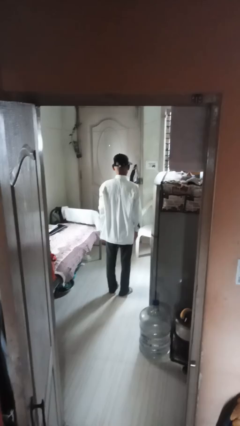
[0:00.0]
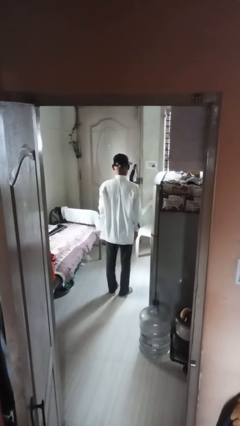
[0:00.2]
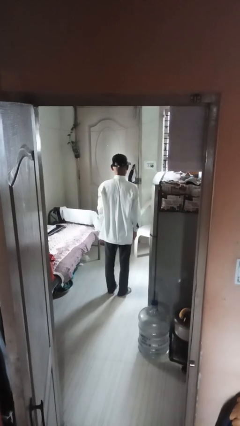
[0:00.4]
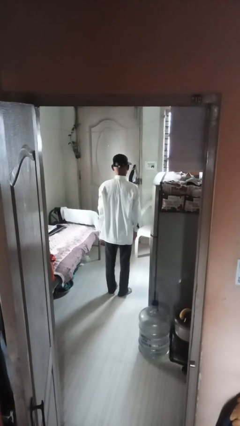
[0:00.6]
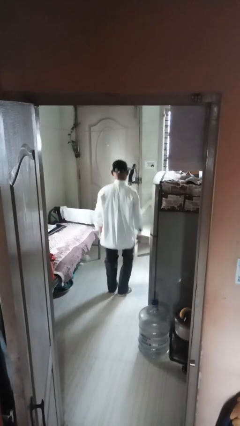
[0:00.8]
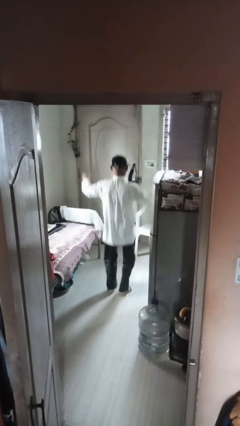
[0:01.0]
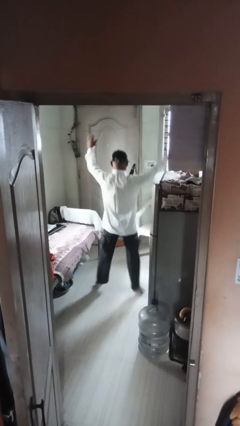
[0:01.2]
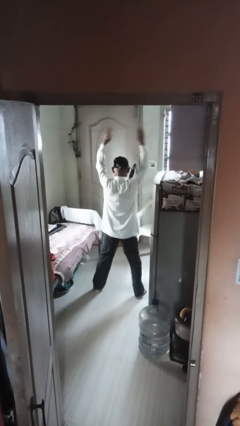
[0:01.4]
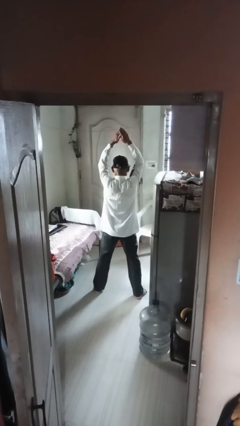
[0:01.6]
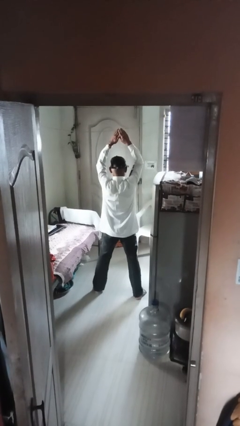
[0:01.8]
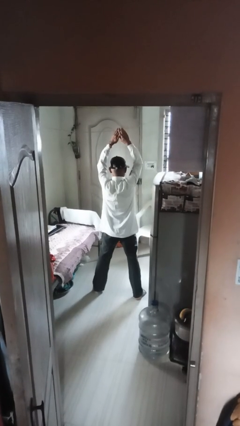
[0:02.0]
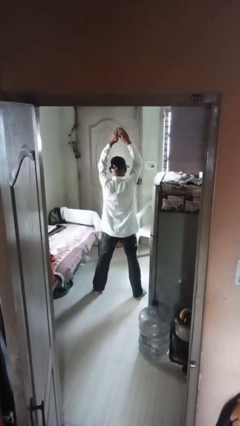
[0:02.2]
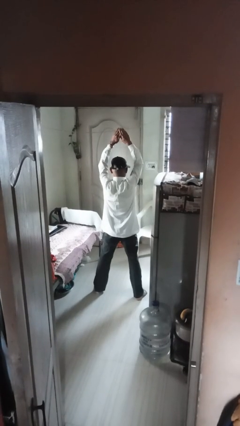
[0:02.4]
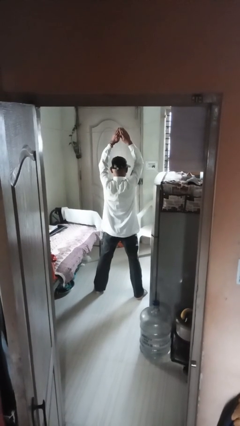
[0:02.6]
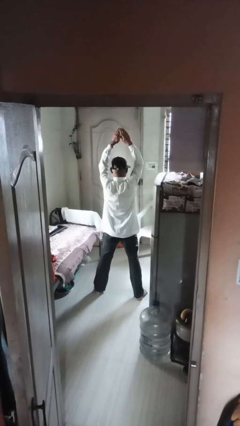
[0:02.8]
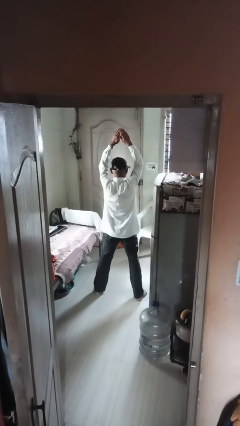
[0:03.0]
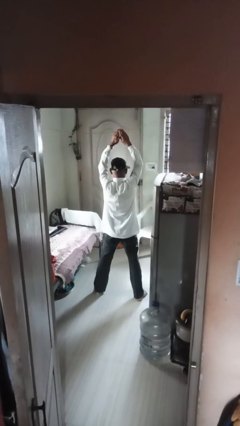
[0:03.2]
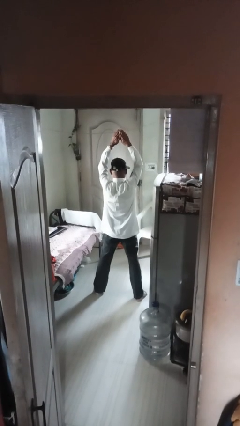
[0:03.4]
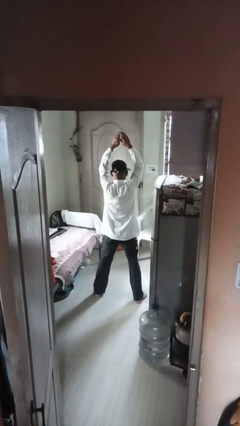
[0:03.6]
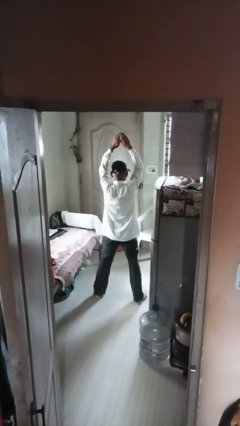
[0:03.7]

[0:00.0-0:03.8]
person exercises with jumping jacks

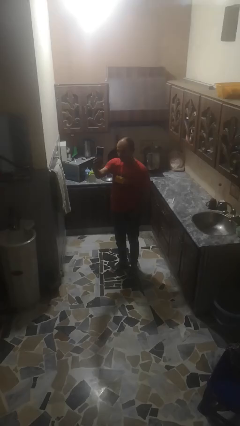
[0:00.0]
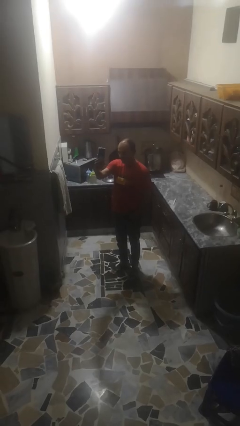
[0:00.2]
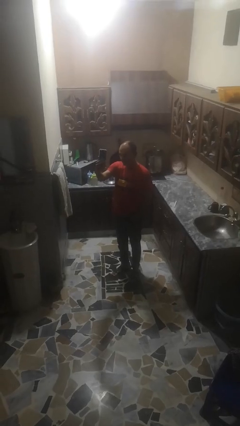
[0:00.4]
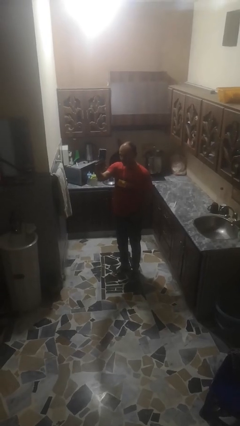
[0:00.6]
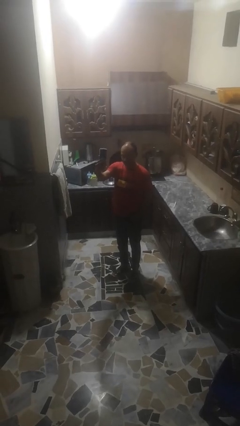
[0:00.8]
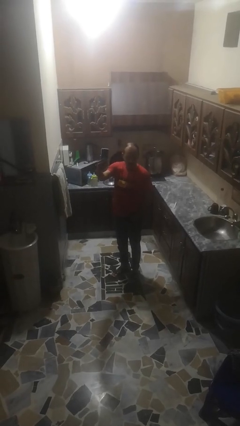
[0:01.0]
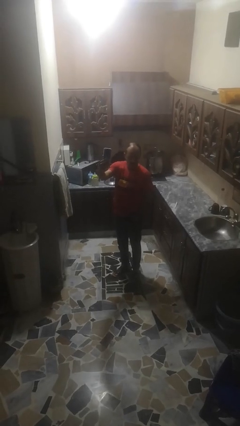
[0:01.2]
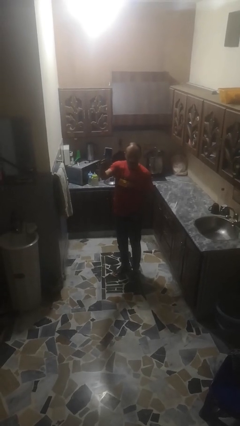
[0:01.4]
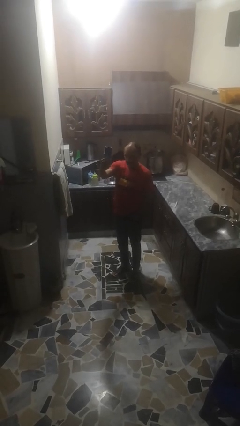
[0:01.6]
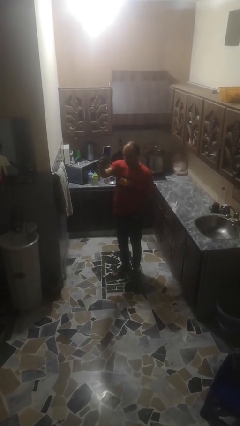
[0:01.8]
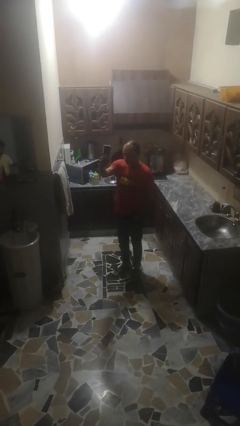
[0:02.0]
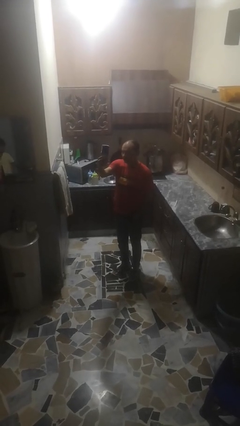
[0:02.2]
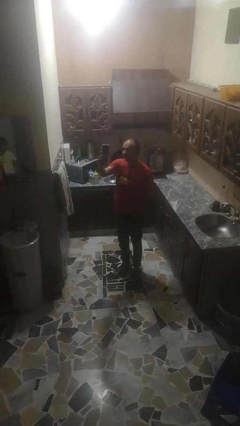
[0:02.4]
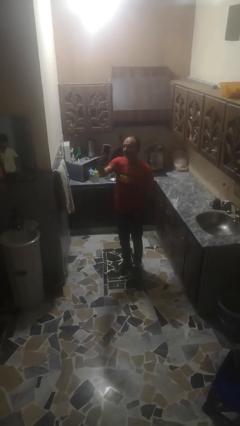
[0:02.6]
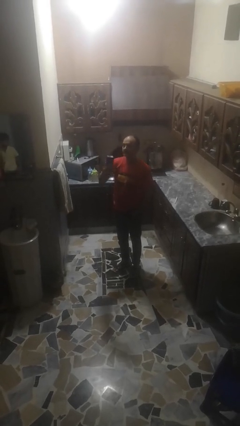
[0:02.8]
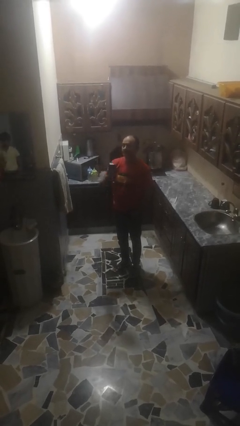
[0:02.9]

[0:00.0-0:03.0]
person takes selfie

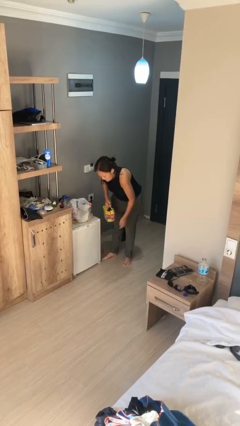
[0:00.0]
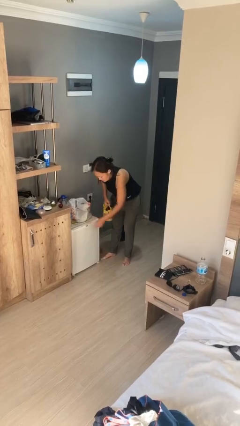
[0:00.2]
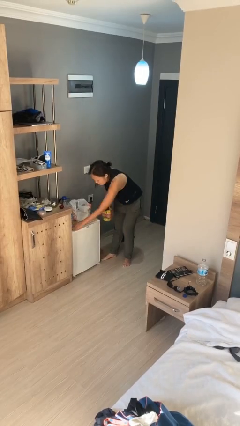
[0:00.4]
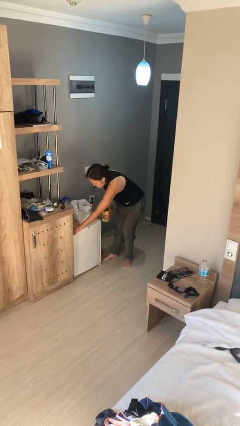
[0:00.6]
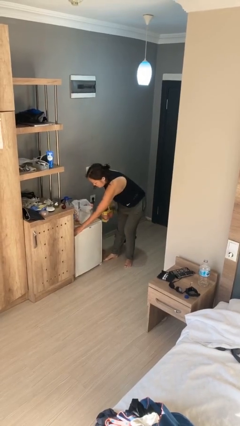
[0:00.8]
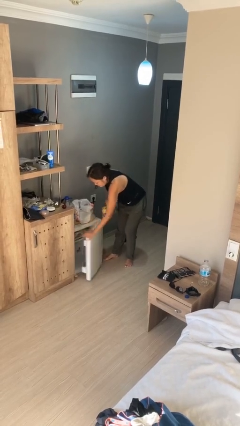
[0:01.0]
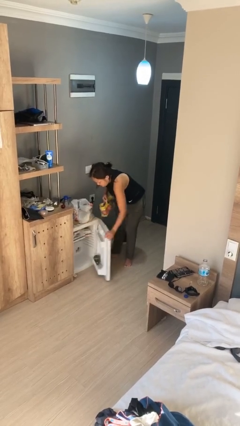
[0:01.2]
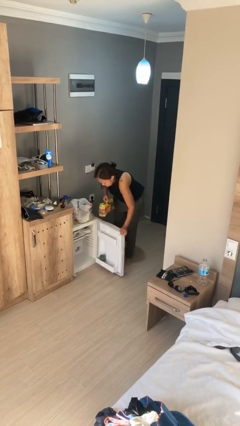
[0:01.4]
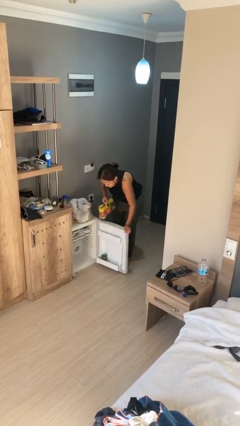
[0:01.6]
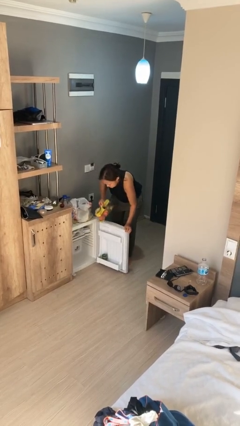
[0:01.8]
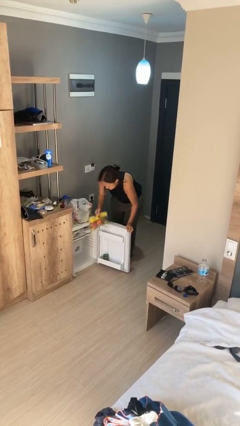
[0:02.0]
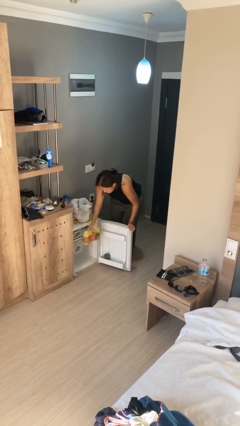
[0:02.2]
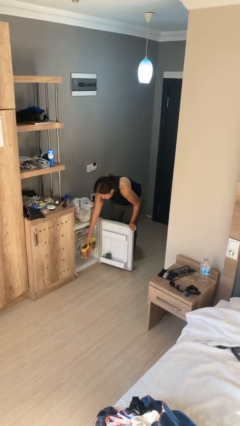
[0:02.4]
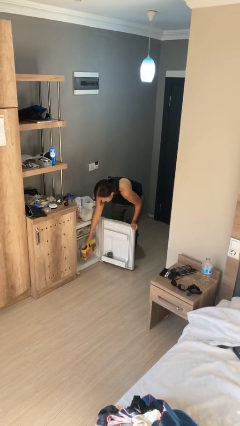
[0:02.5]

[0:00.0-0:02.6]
person opens refrigerator

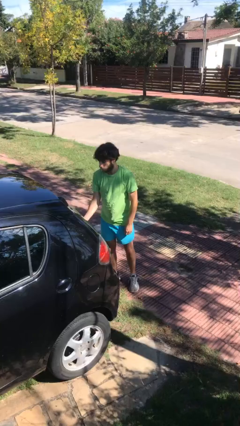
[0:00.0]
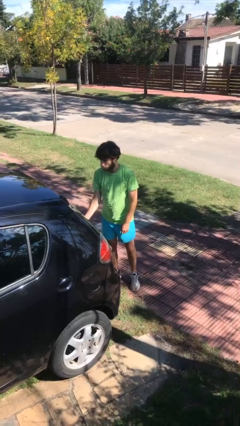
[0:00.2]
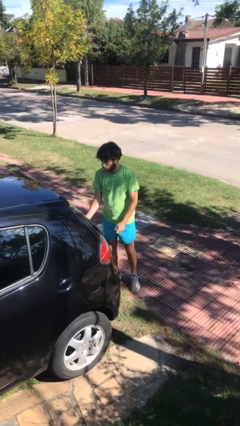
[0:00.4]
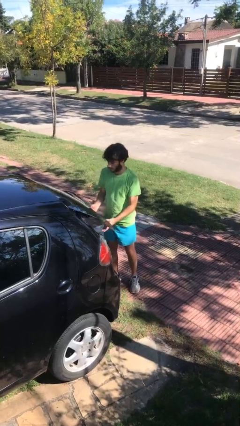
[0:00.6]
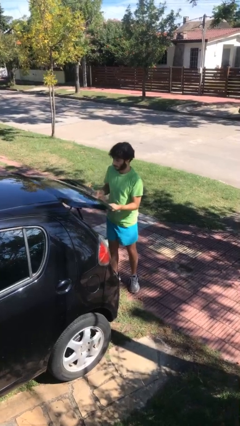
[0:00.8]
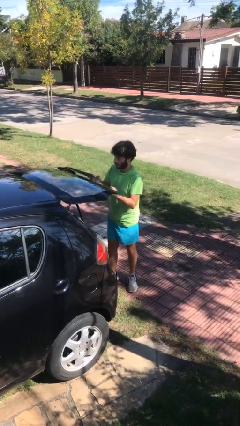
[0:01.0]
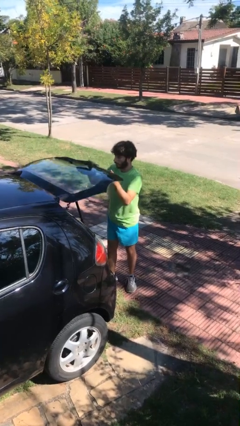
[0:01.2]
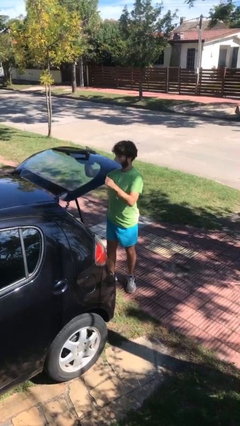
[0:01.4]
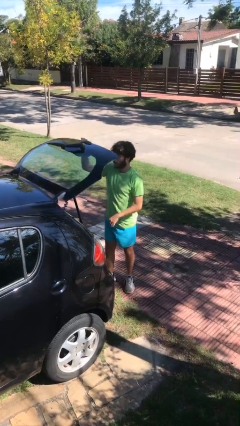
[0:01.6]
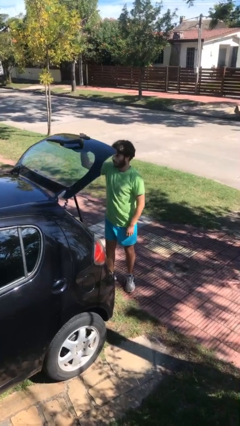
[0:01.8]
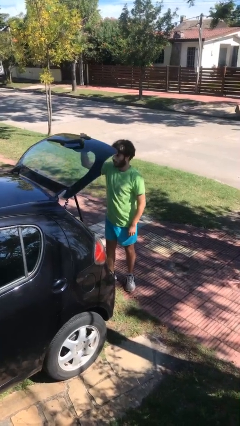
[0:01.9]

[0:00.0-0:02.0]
person opens car trunk

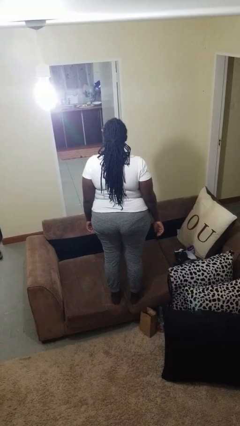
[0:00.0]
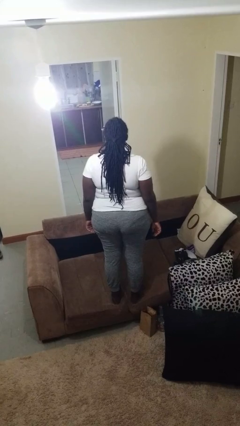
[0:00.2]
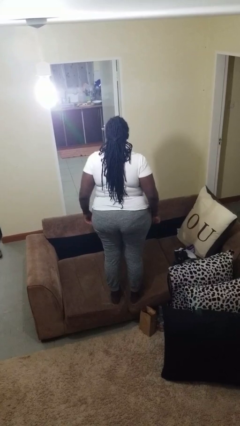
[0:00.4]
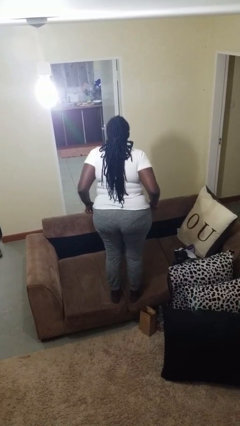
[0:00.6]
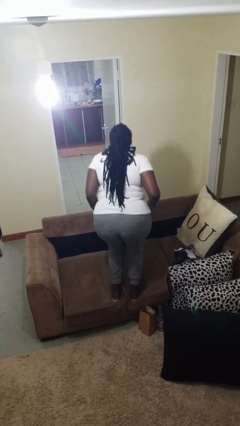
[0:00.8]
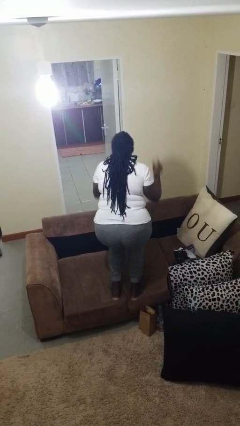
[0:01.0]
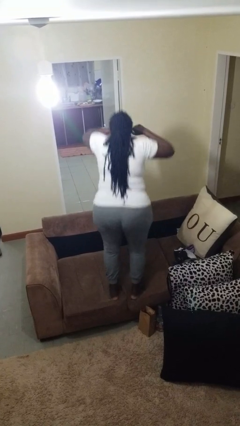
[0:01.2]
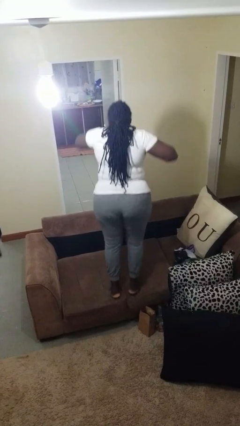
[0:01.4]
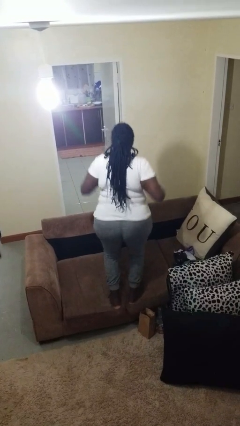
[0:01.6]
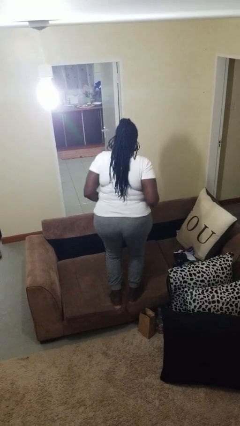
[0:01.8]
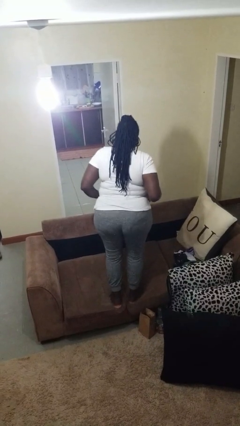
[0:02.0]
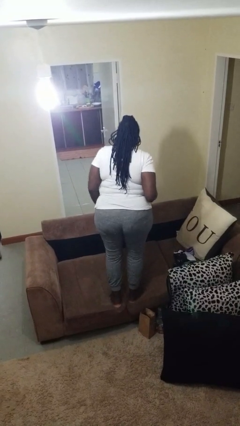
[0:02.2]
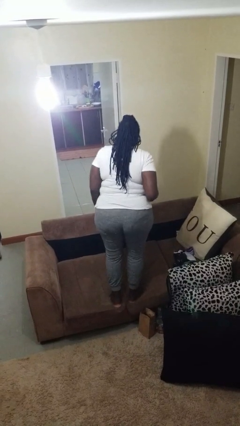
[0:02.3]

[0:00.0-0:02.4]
person jumps on couch

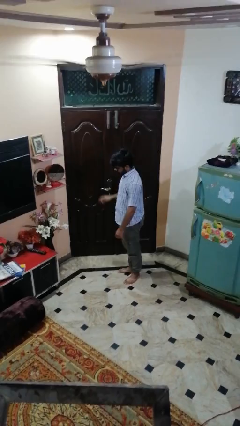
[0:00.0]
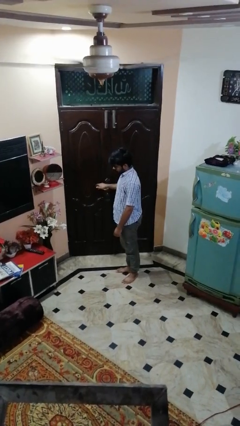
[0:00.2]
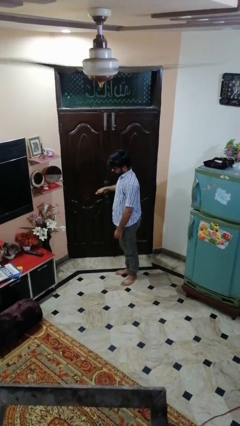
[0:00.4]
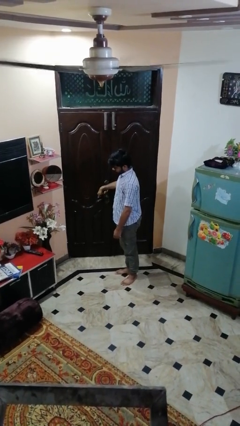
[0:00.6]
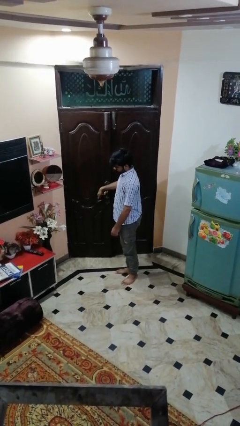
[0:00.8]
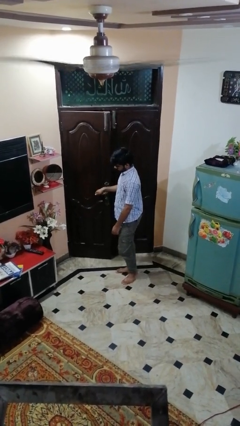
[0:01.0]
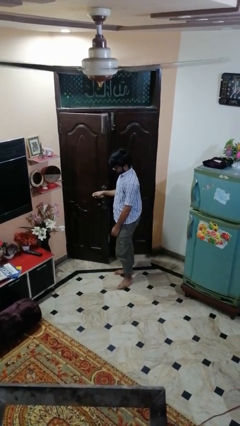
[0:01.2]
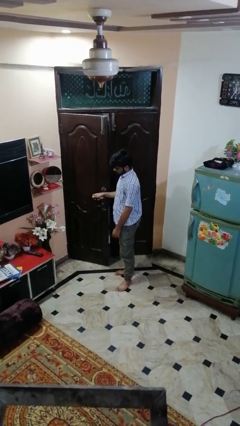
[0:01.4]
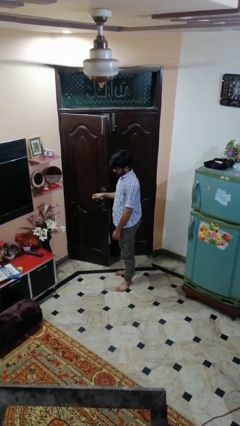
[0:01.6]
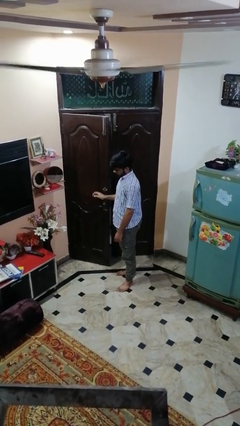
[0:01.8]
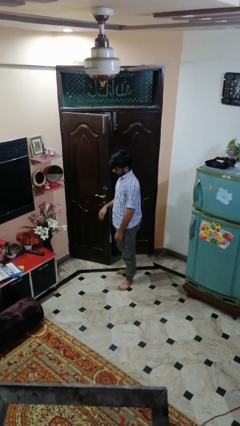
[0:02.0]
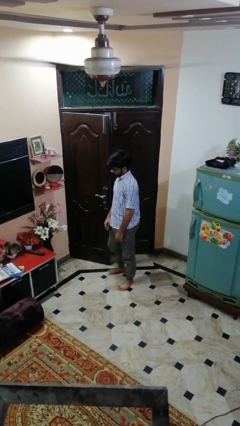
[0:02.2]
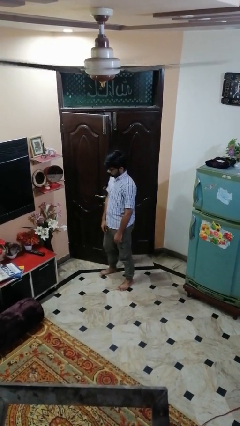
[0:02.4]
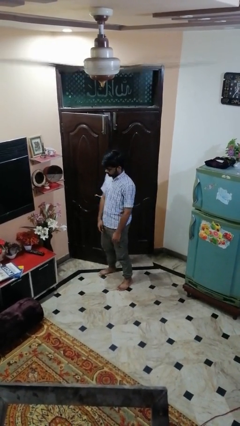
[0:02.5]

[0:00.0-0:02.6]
person opens facility door

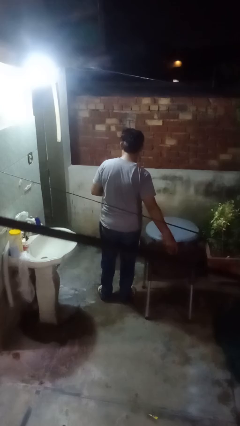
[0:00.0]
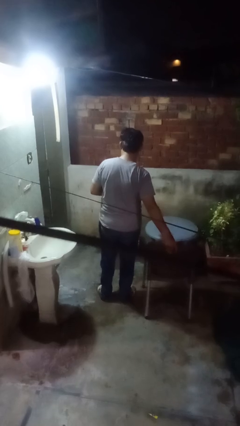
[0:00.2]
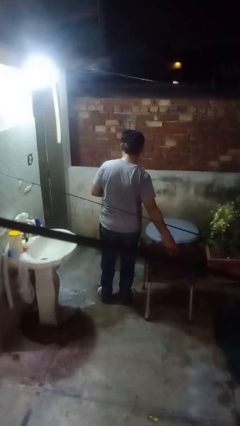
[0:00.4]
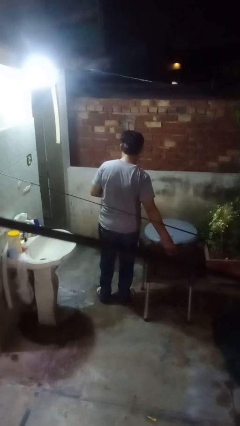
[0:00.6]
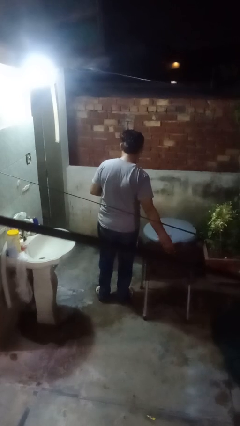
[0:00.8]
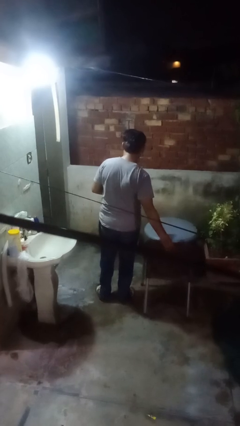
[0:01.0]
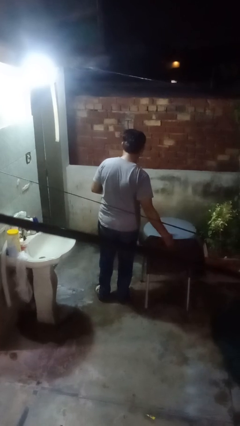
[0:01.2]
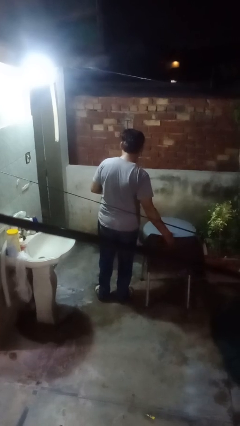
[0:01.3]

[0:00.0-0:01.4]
person pushes in chair
